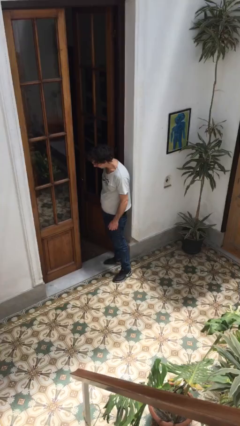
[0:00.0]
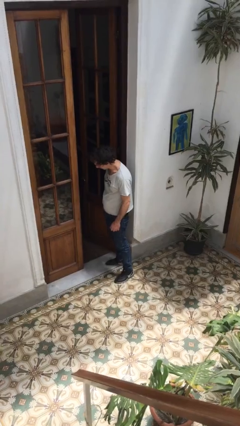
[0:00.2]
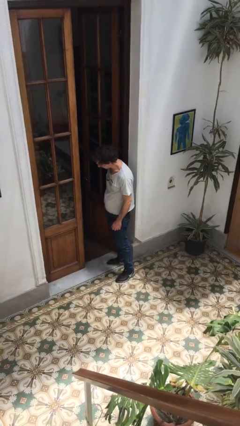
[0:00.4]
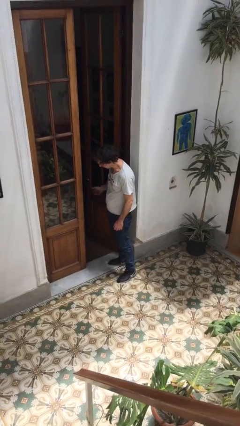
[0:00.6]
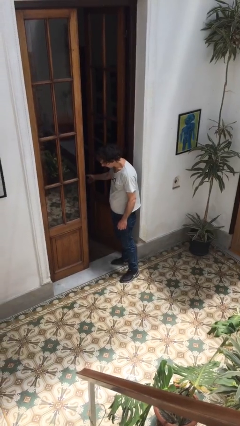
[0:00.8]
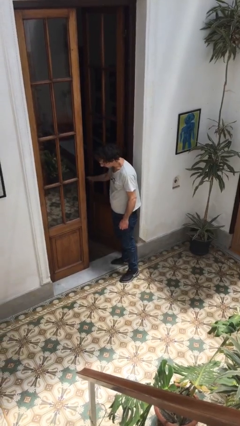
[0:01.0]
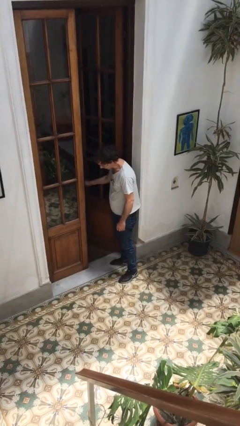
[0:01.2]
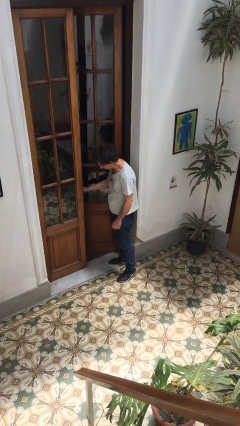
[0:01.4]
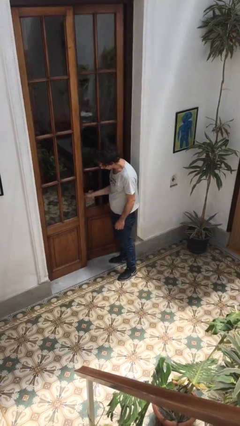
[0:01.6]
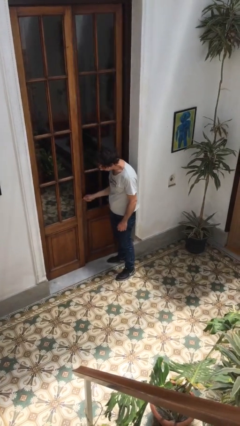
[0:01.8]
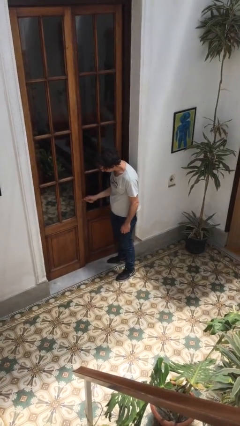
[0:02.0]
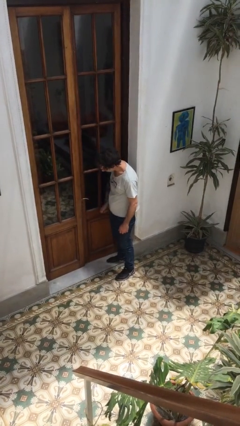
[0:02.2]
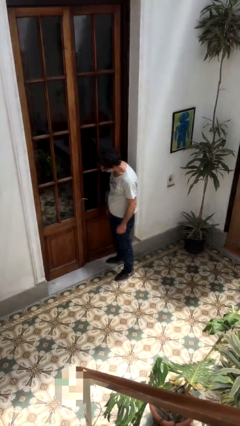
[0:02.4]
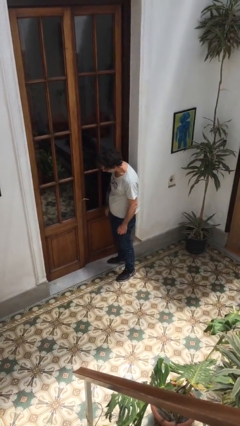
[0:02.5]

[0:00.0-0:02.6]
person closes facility door

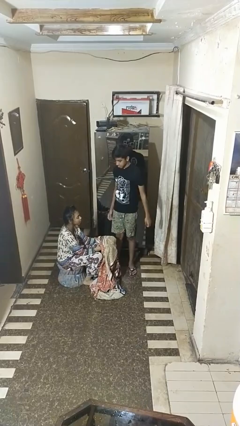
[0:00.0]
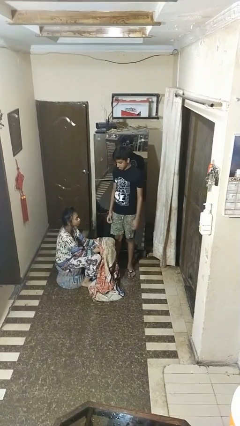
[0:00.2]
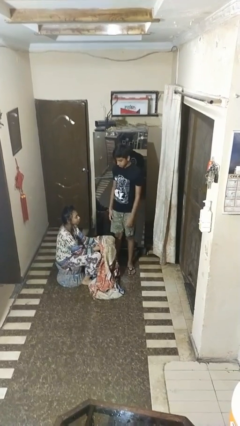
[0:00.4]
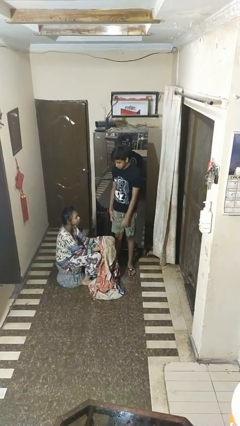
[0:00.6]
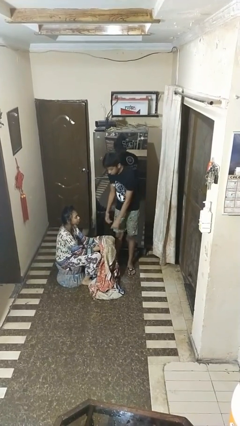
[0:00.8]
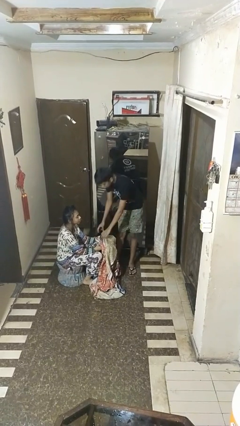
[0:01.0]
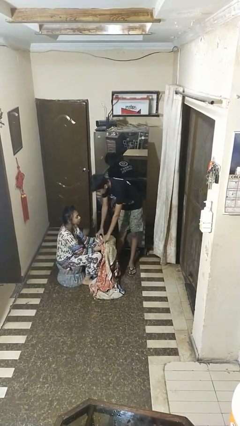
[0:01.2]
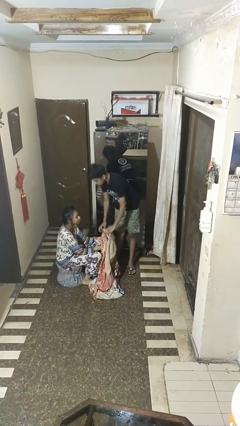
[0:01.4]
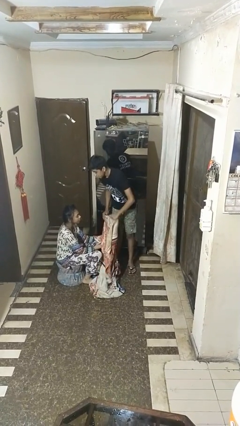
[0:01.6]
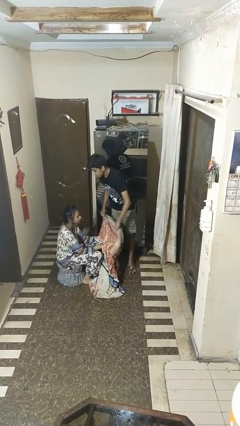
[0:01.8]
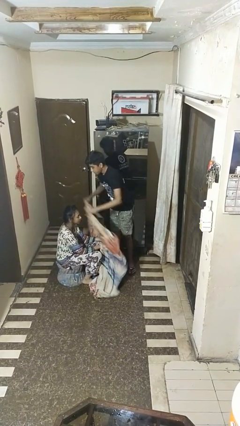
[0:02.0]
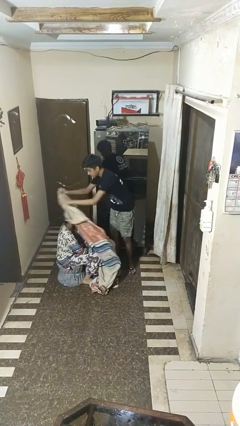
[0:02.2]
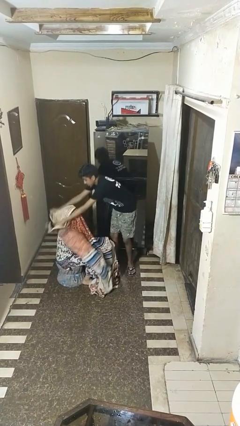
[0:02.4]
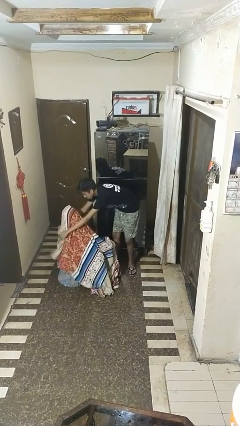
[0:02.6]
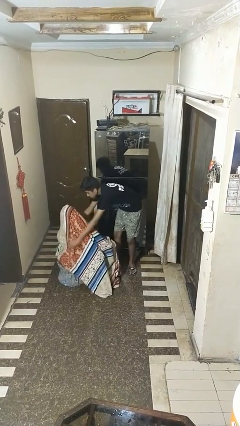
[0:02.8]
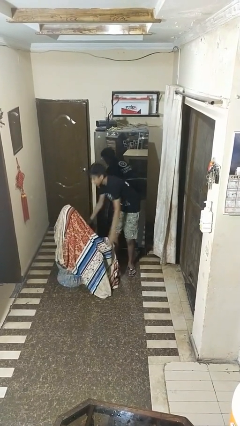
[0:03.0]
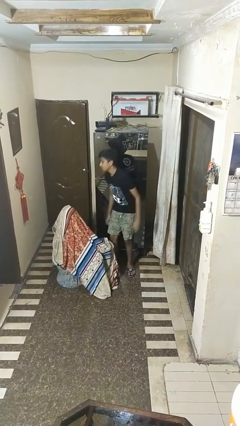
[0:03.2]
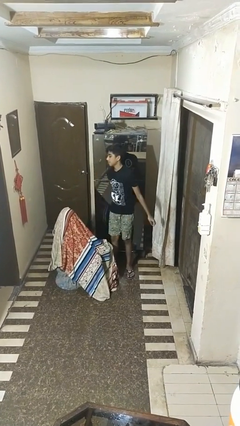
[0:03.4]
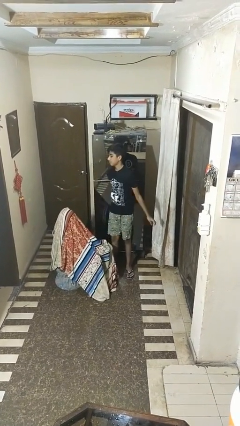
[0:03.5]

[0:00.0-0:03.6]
person covers friend with blanket

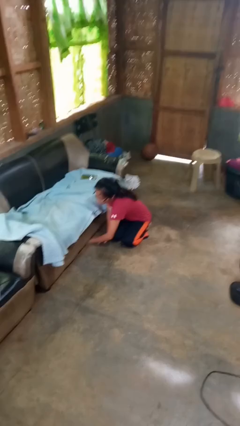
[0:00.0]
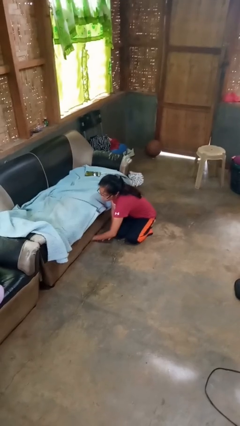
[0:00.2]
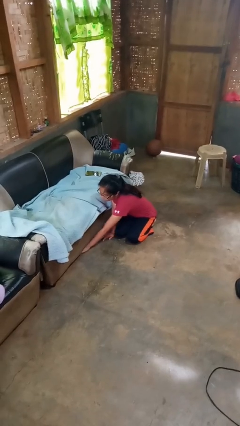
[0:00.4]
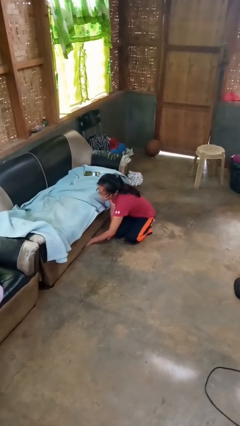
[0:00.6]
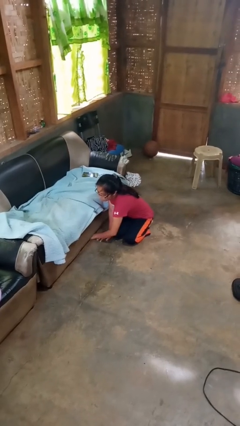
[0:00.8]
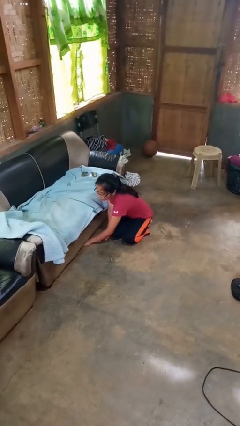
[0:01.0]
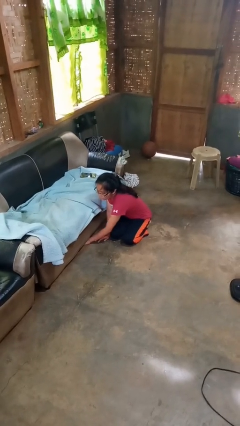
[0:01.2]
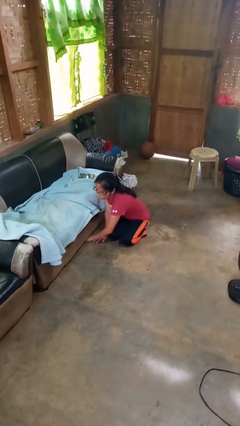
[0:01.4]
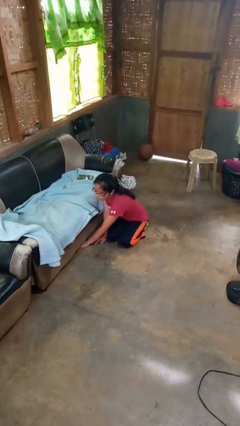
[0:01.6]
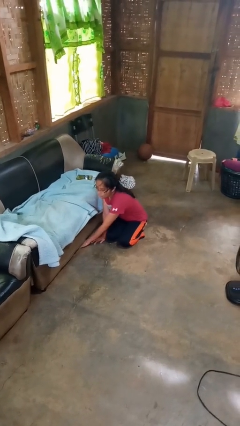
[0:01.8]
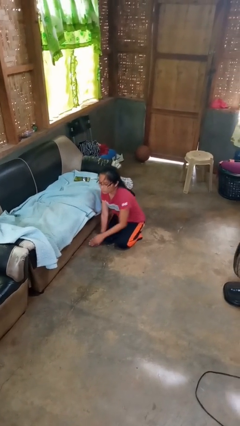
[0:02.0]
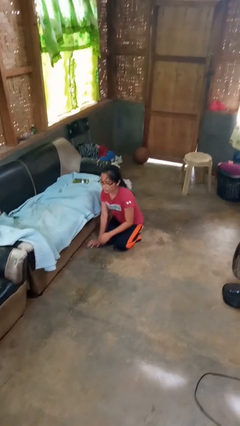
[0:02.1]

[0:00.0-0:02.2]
person searches under couch

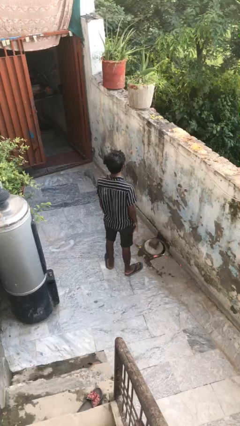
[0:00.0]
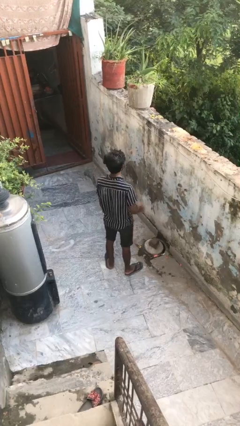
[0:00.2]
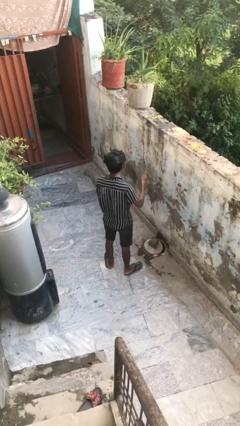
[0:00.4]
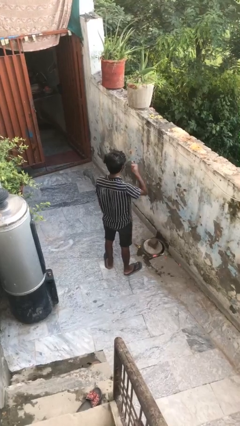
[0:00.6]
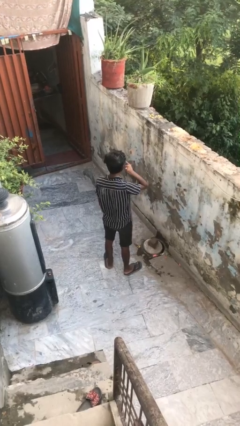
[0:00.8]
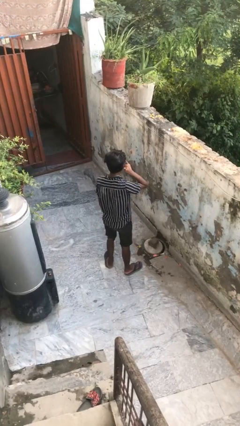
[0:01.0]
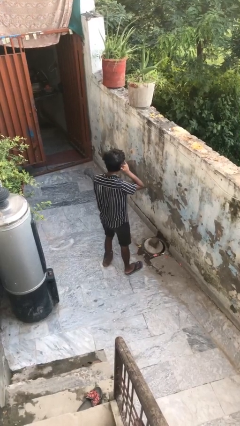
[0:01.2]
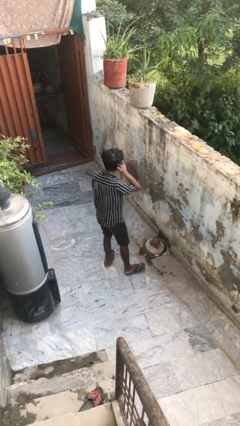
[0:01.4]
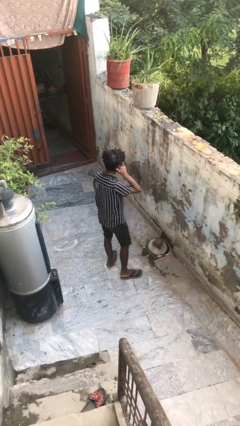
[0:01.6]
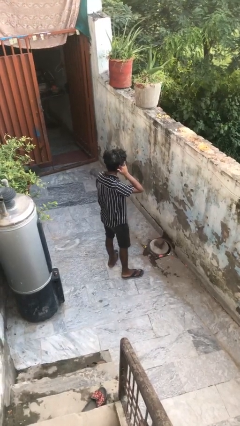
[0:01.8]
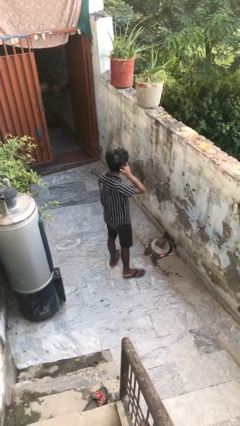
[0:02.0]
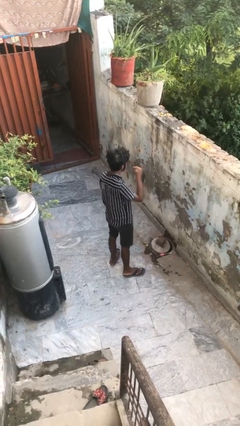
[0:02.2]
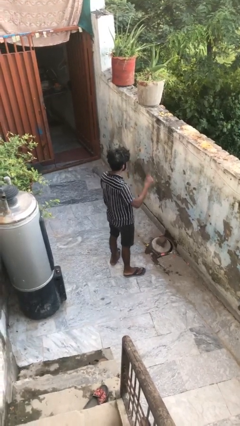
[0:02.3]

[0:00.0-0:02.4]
person gestures call me

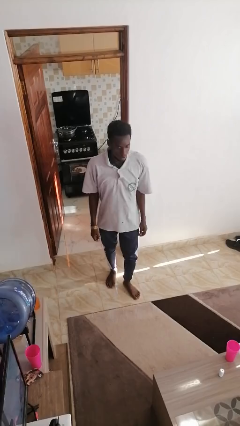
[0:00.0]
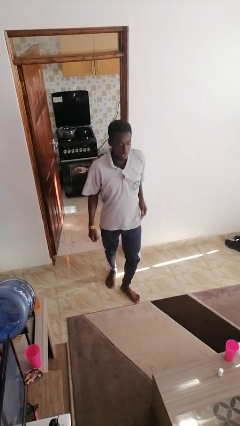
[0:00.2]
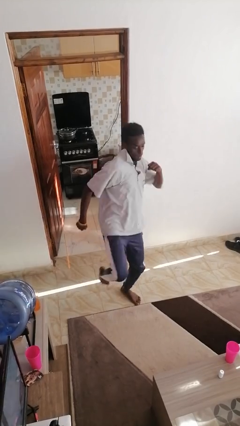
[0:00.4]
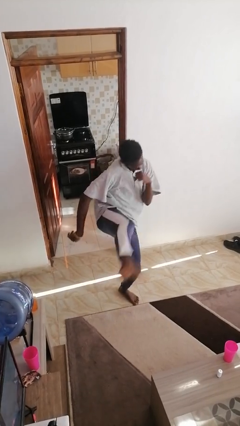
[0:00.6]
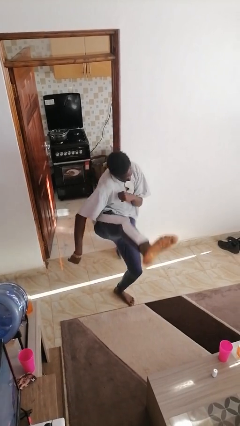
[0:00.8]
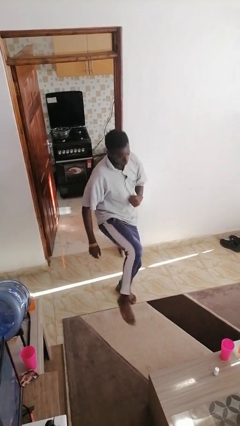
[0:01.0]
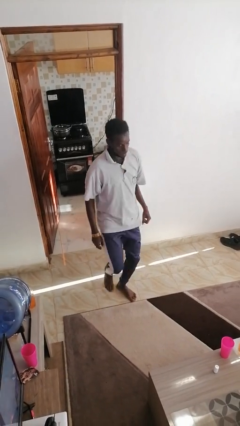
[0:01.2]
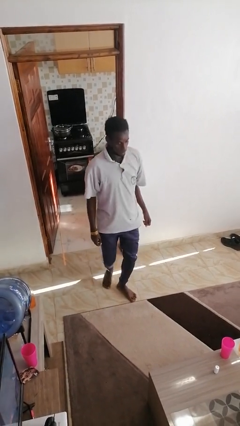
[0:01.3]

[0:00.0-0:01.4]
person karate kicks

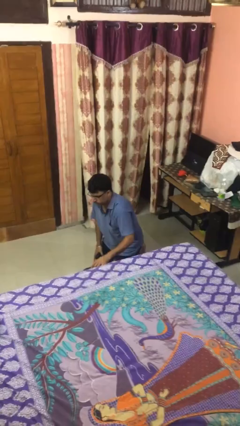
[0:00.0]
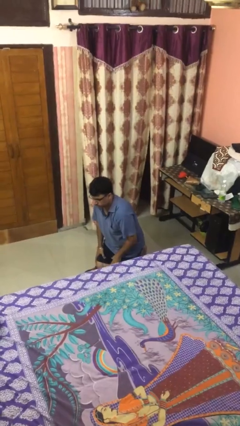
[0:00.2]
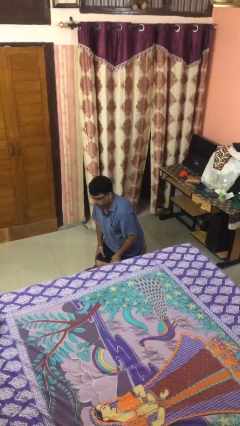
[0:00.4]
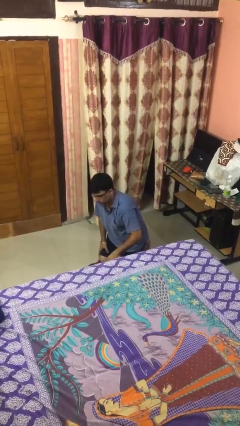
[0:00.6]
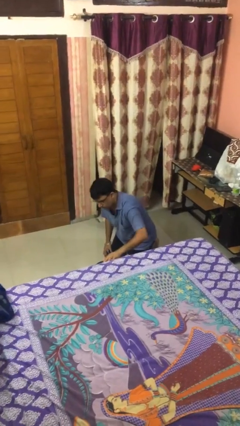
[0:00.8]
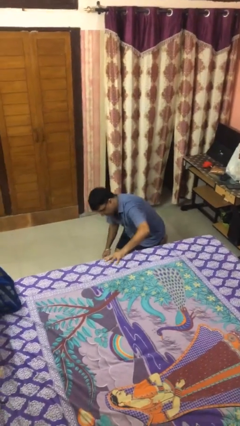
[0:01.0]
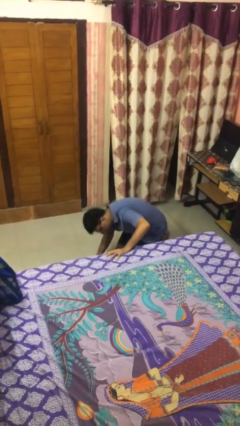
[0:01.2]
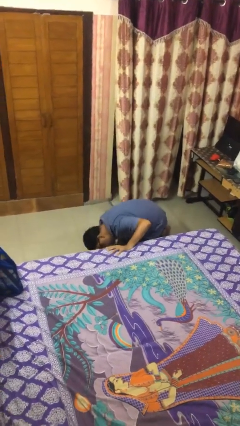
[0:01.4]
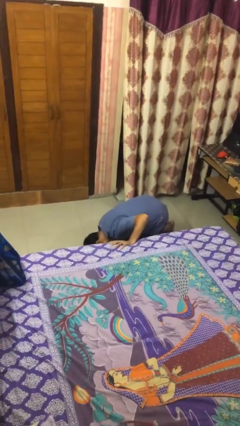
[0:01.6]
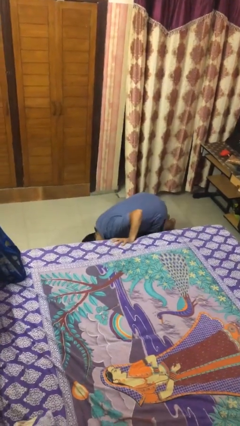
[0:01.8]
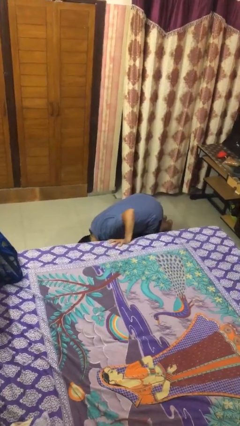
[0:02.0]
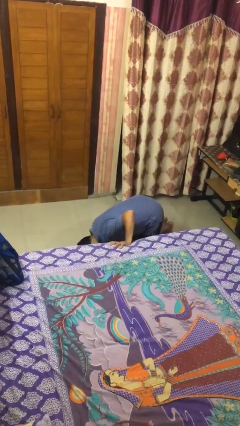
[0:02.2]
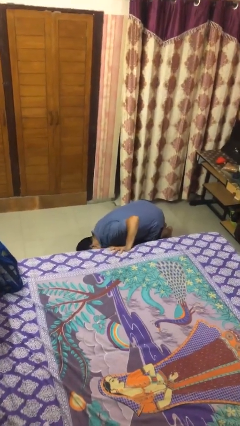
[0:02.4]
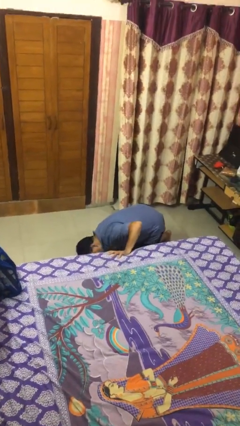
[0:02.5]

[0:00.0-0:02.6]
person searches under bed

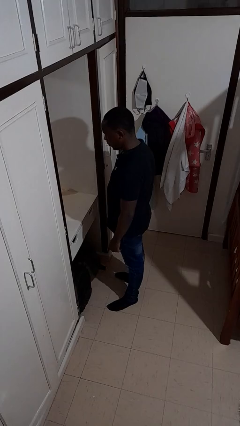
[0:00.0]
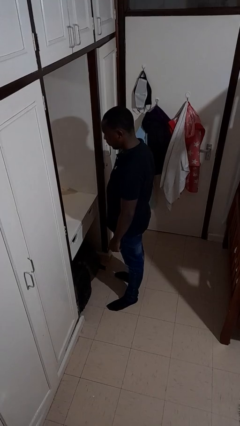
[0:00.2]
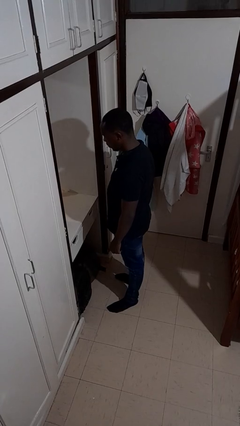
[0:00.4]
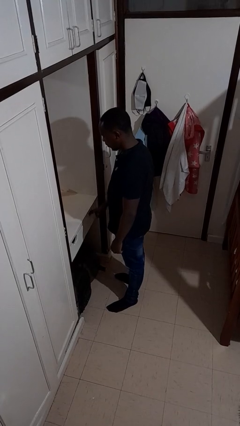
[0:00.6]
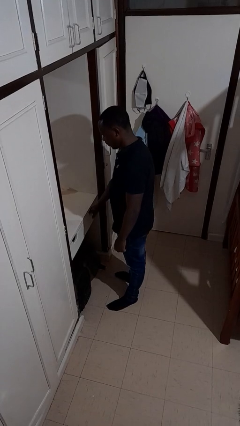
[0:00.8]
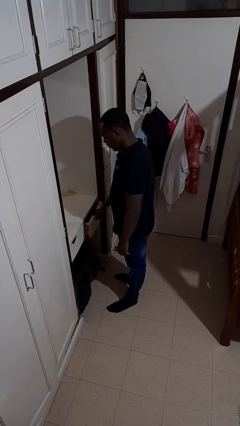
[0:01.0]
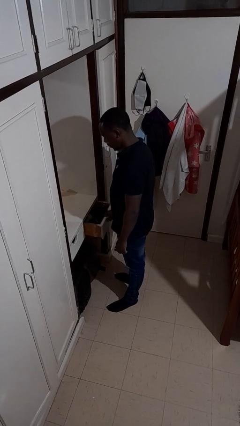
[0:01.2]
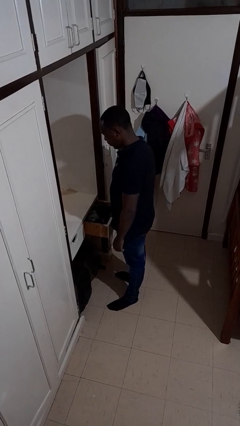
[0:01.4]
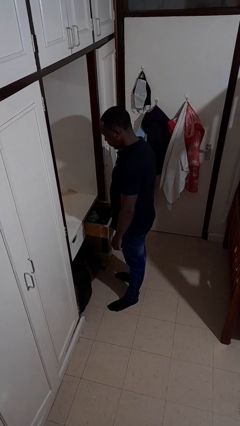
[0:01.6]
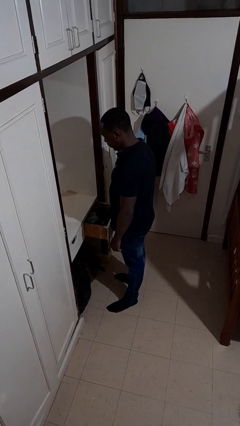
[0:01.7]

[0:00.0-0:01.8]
person opens dresser drawer

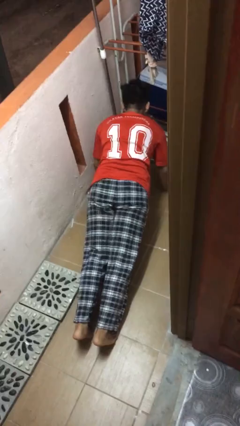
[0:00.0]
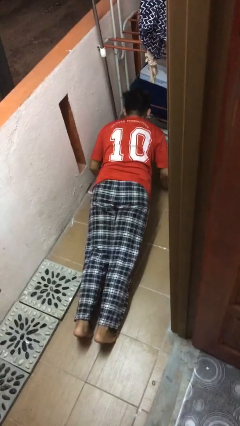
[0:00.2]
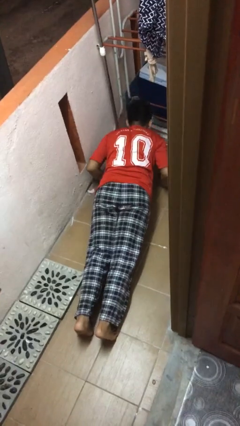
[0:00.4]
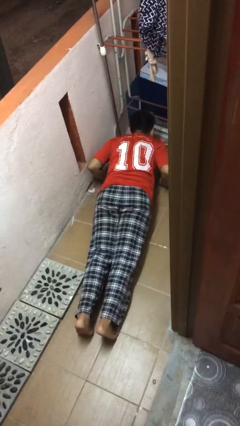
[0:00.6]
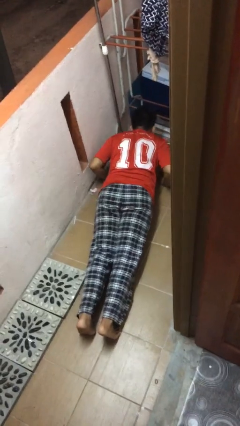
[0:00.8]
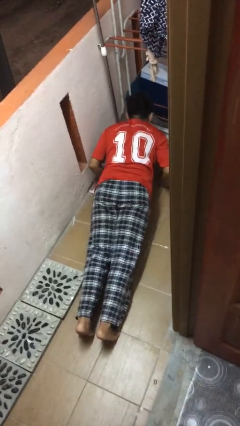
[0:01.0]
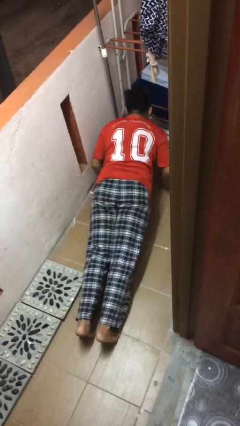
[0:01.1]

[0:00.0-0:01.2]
person exercises with pushup
